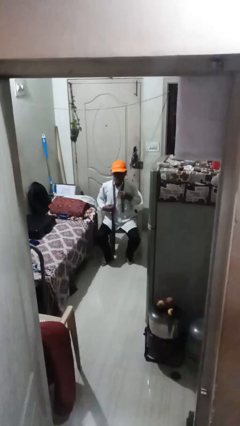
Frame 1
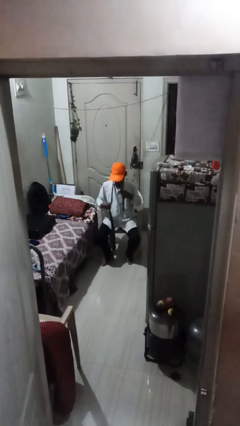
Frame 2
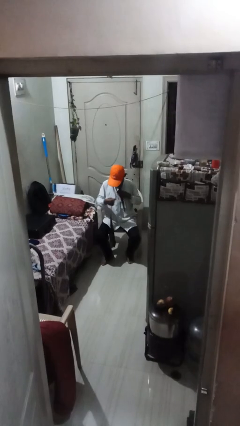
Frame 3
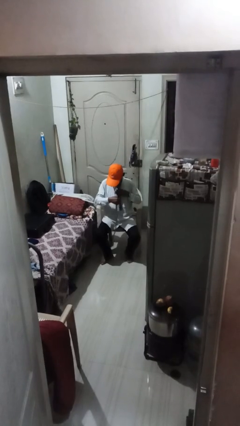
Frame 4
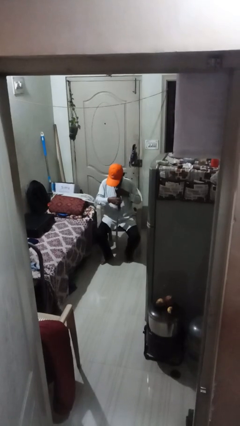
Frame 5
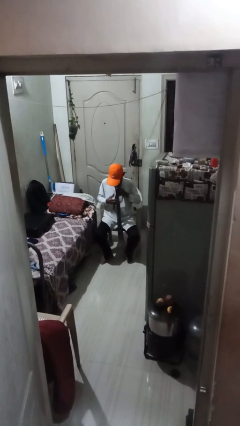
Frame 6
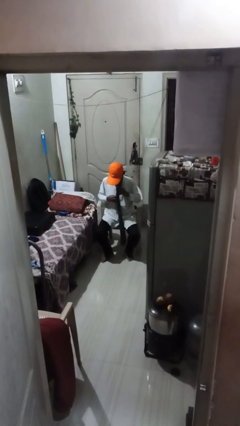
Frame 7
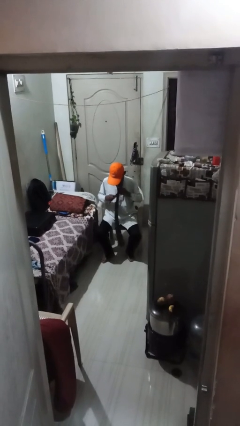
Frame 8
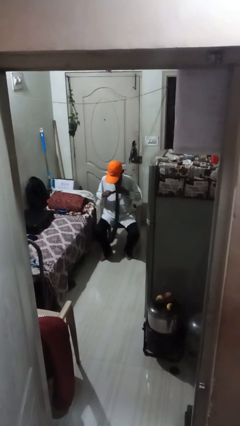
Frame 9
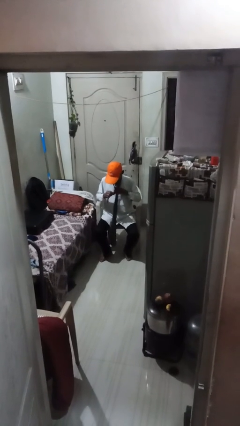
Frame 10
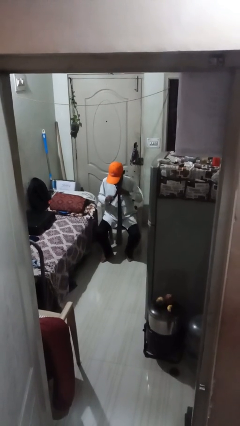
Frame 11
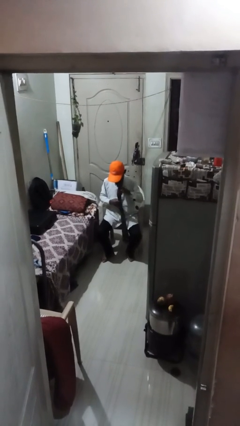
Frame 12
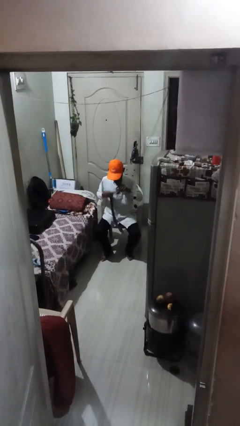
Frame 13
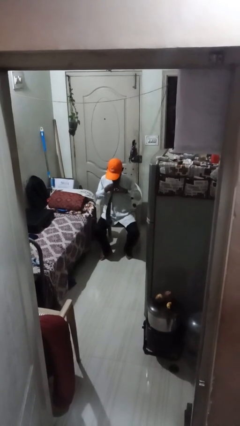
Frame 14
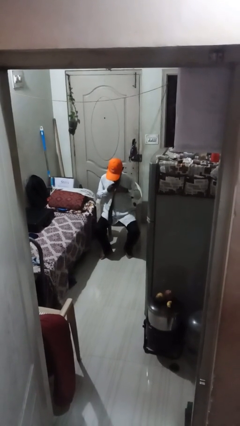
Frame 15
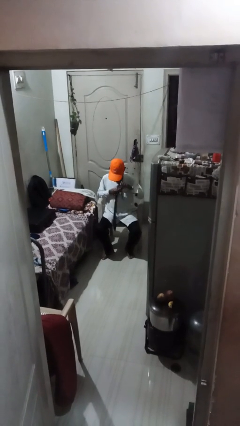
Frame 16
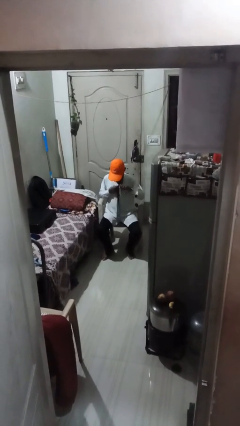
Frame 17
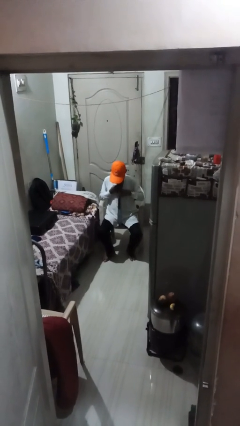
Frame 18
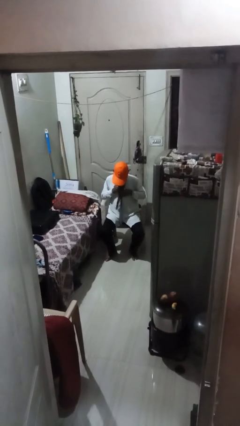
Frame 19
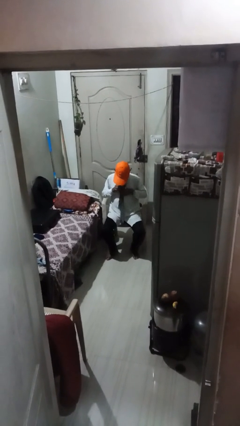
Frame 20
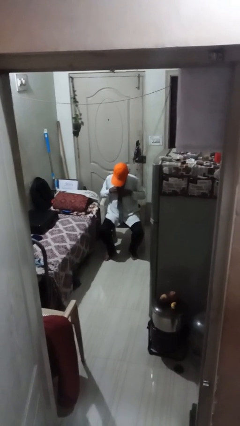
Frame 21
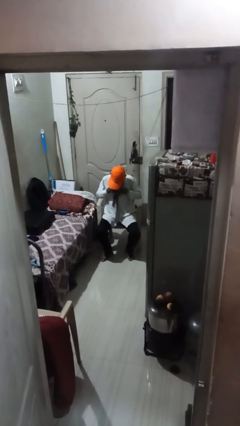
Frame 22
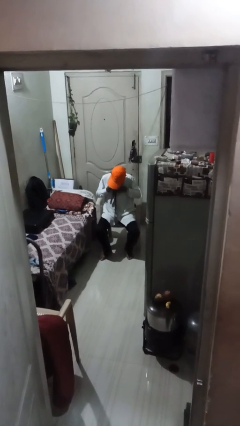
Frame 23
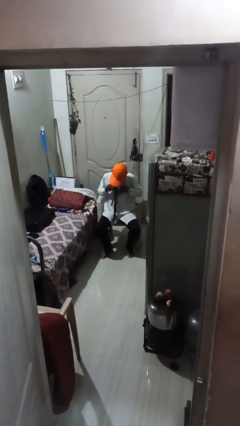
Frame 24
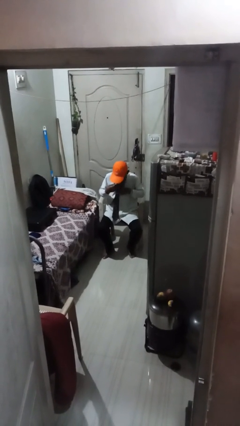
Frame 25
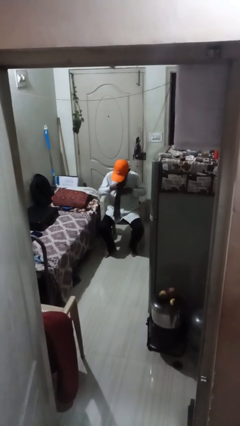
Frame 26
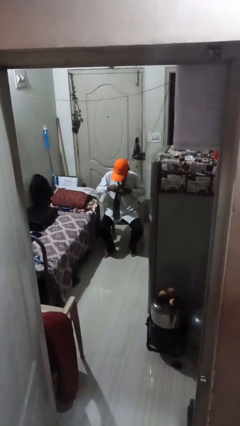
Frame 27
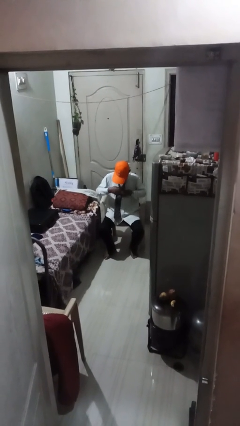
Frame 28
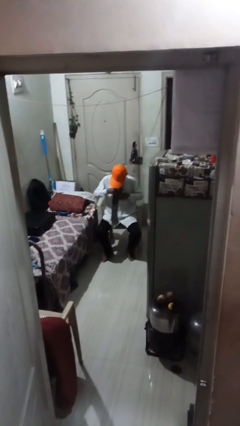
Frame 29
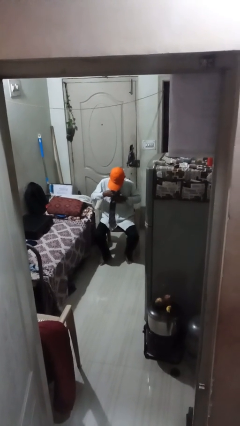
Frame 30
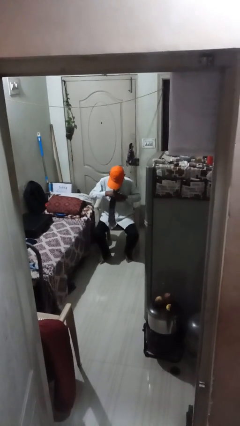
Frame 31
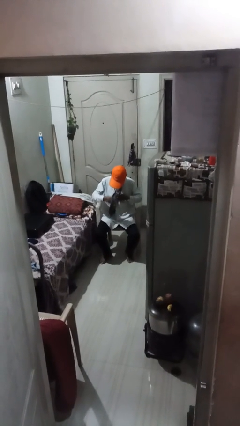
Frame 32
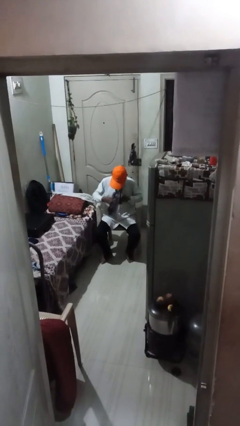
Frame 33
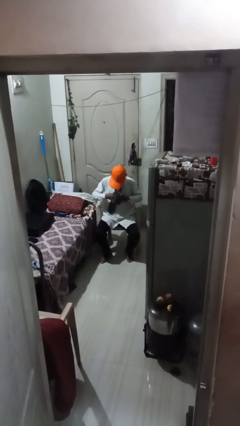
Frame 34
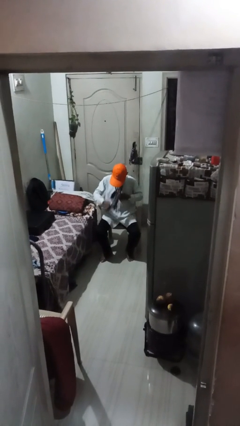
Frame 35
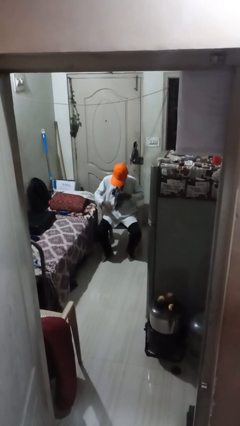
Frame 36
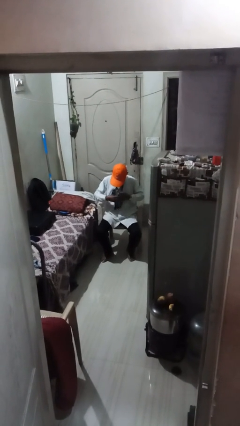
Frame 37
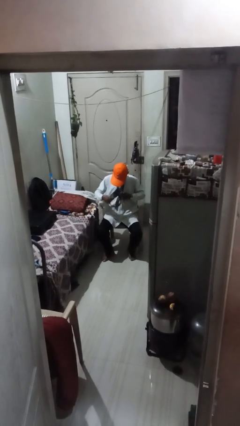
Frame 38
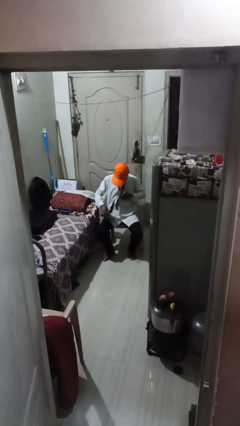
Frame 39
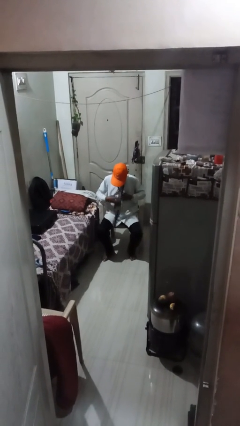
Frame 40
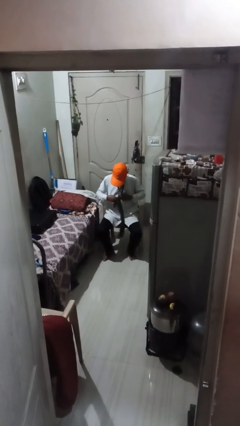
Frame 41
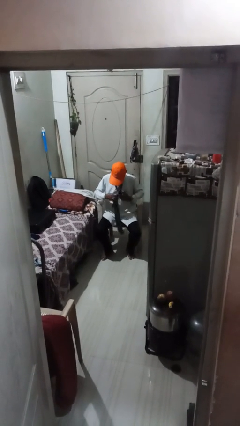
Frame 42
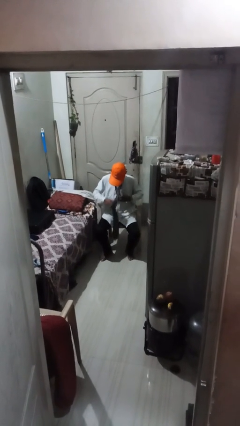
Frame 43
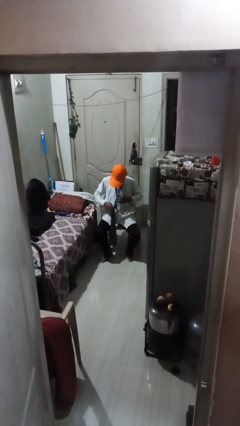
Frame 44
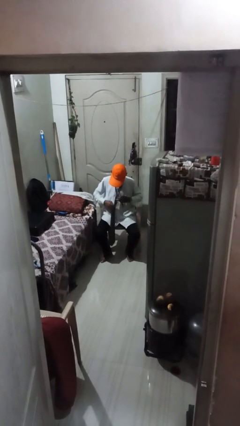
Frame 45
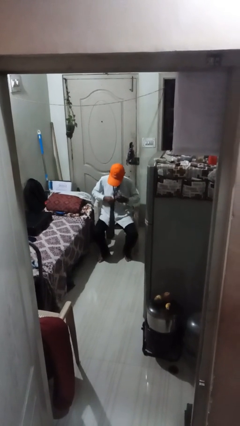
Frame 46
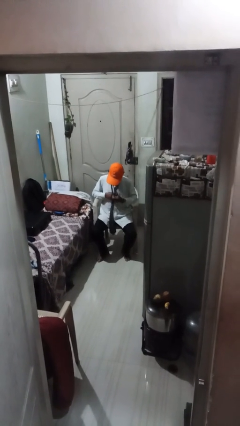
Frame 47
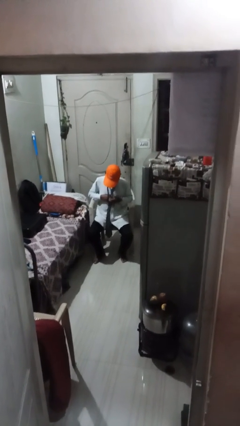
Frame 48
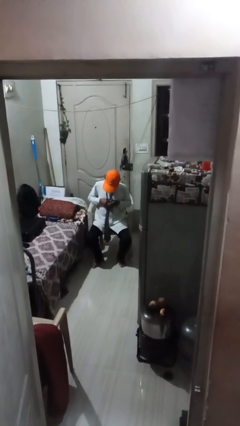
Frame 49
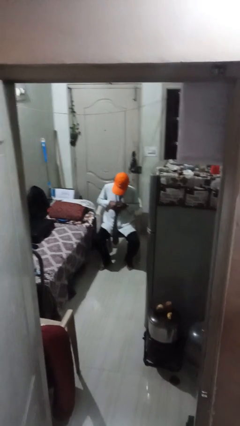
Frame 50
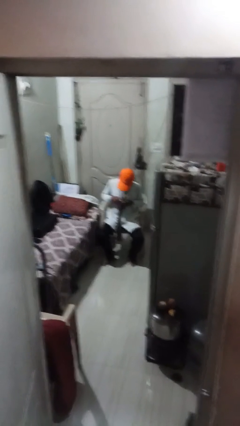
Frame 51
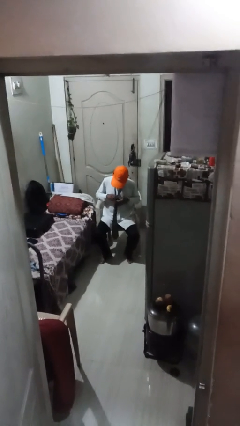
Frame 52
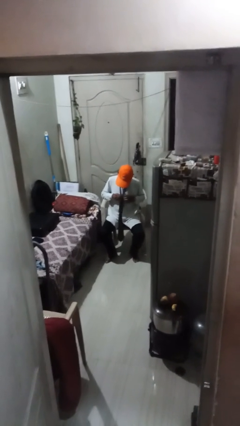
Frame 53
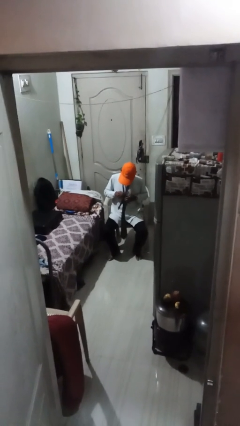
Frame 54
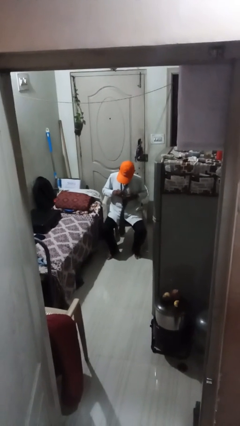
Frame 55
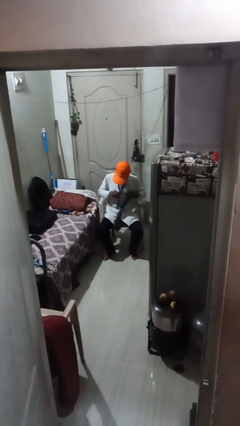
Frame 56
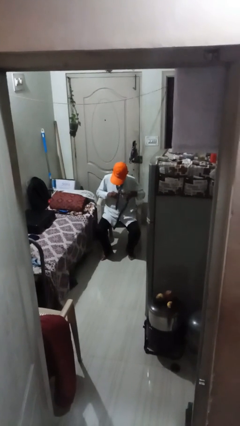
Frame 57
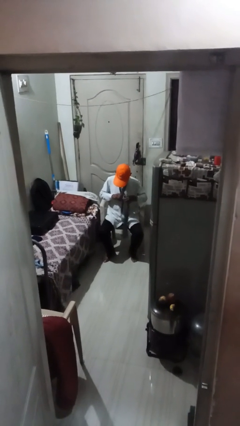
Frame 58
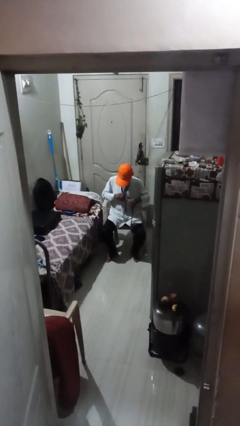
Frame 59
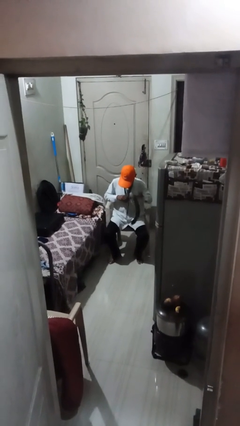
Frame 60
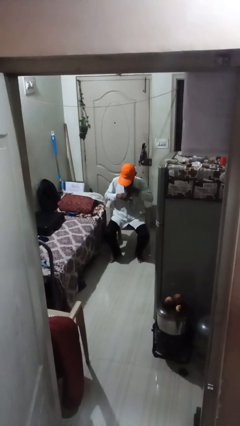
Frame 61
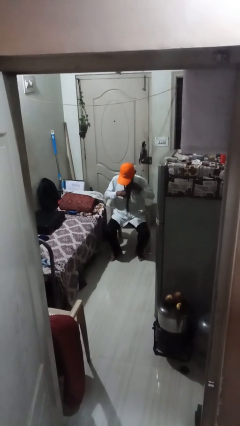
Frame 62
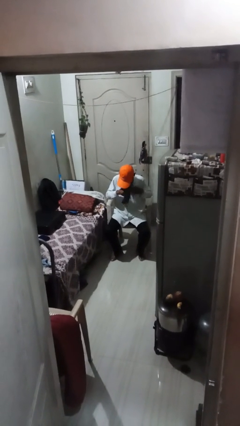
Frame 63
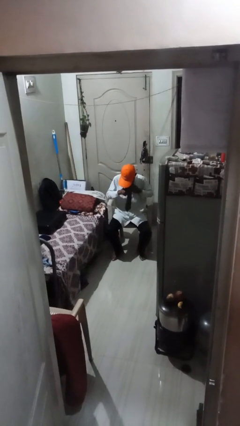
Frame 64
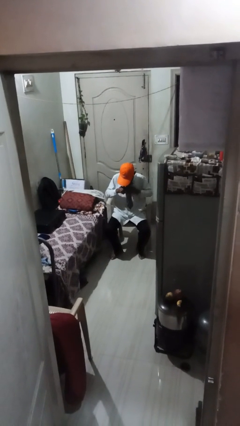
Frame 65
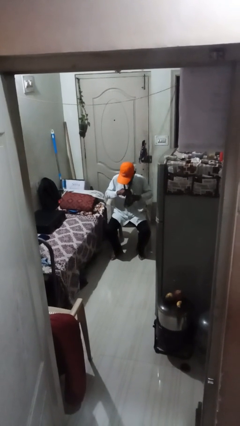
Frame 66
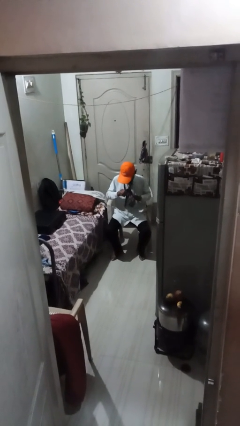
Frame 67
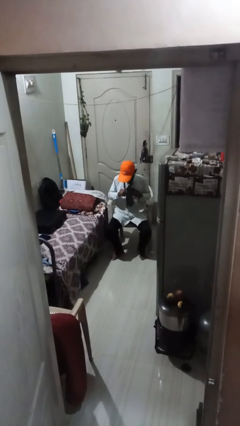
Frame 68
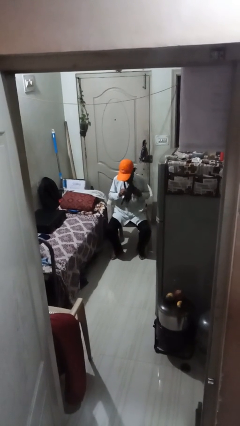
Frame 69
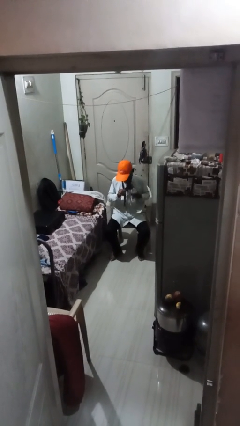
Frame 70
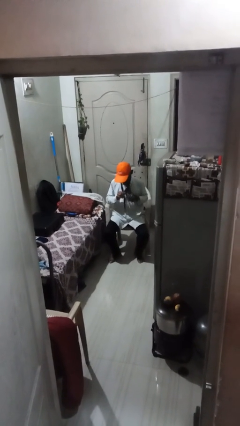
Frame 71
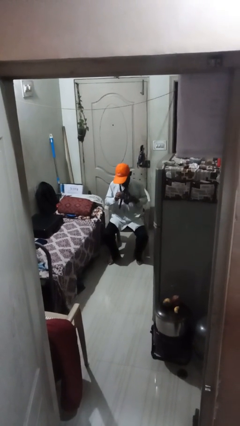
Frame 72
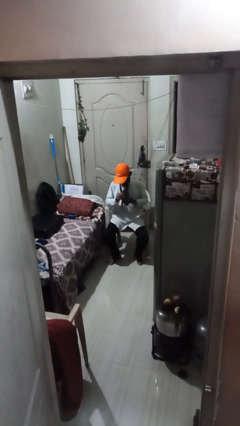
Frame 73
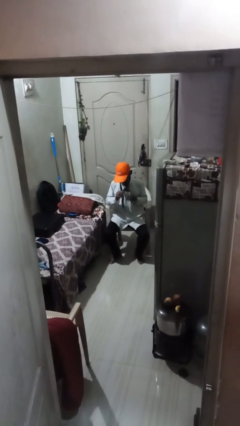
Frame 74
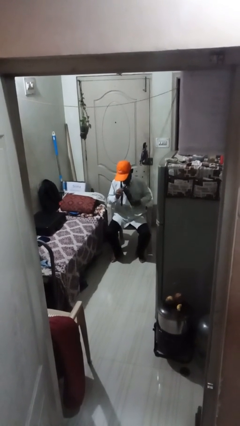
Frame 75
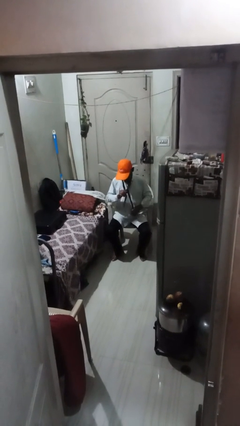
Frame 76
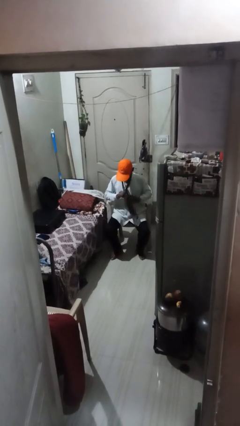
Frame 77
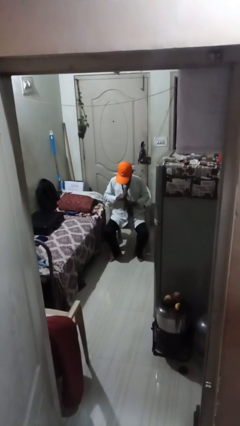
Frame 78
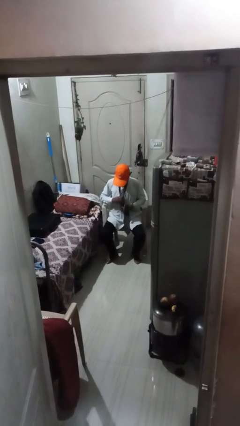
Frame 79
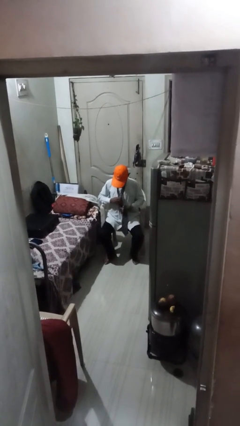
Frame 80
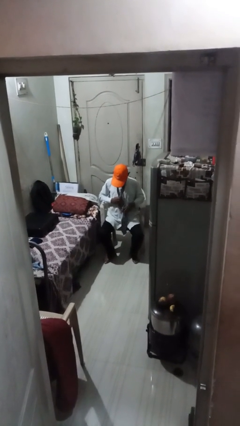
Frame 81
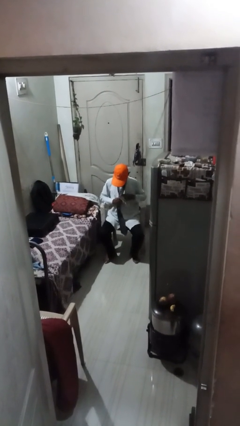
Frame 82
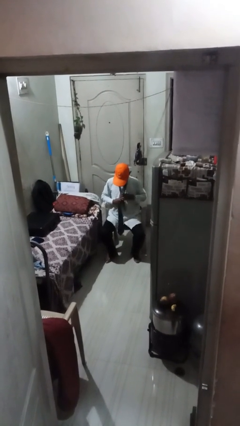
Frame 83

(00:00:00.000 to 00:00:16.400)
person puts on necktie

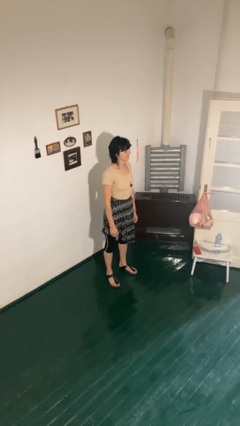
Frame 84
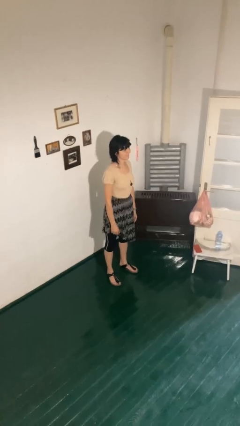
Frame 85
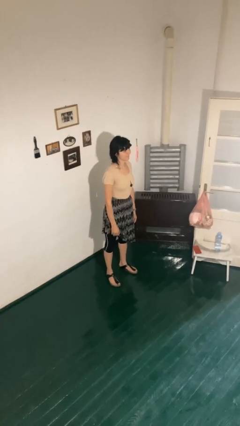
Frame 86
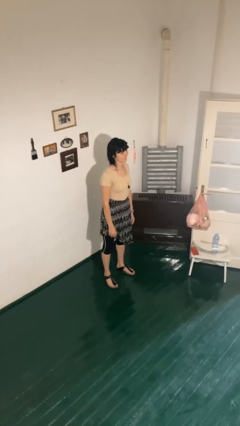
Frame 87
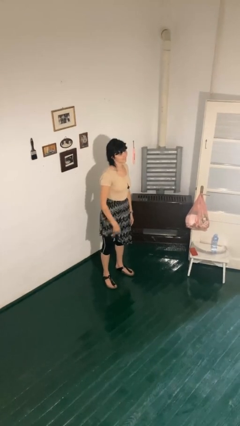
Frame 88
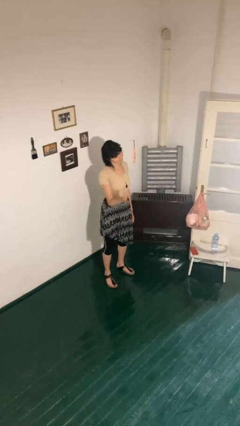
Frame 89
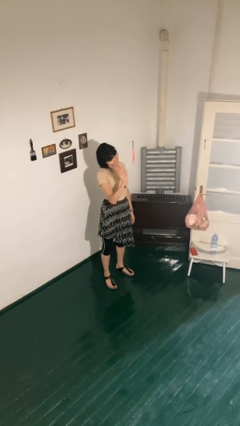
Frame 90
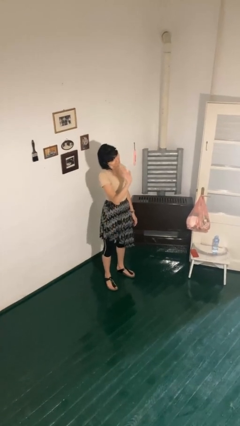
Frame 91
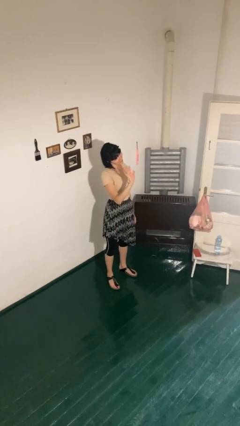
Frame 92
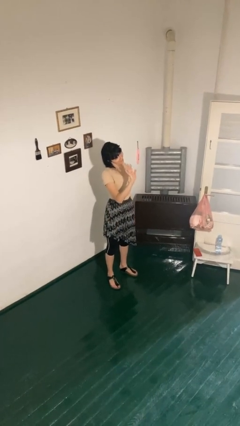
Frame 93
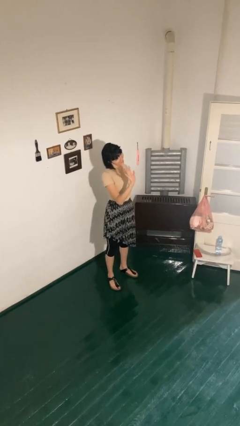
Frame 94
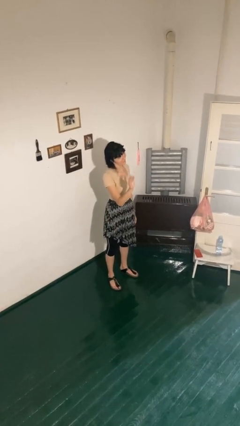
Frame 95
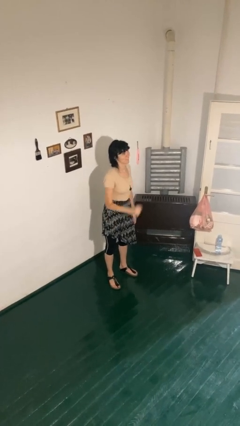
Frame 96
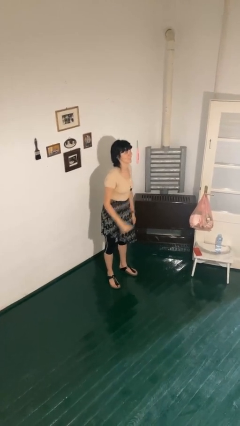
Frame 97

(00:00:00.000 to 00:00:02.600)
person waves at person
